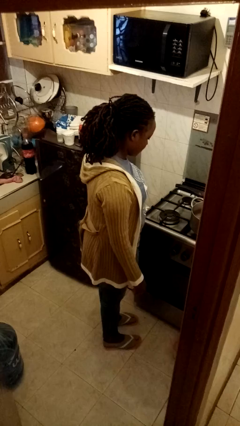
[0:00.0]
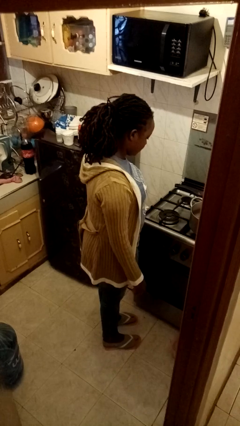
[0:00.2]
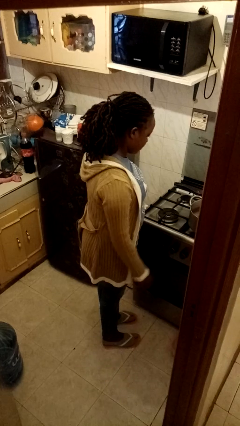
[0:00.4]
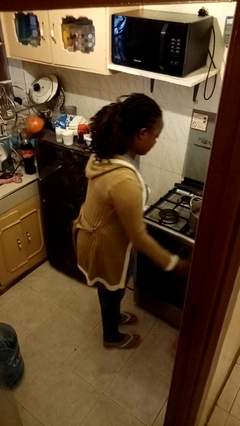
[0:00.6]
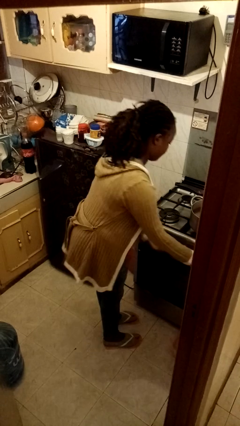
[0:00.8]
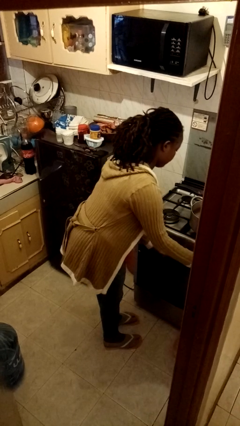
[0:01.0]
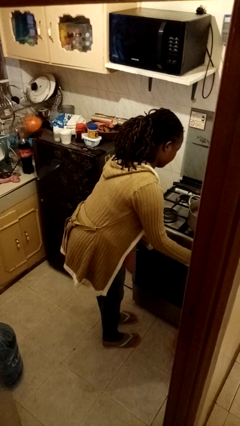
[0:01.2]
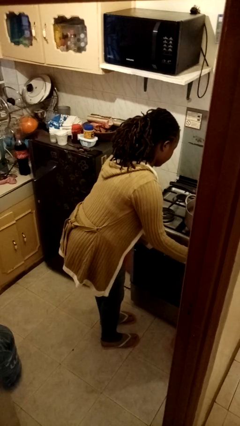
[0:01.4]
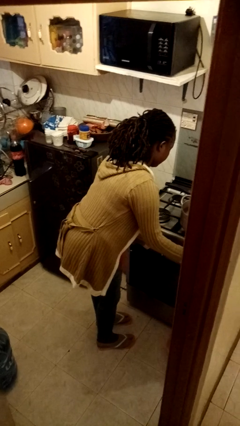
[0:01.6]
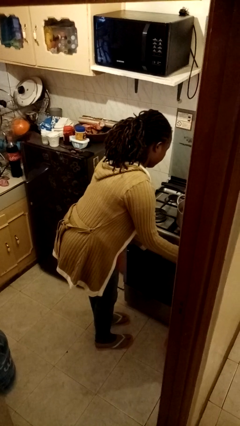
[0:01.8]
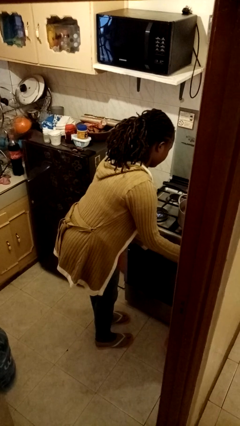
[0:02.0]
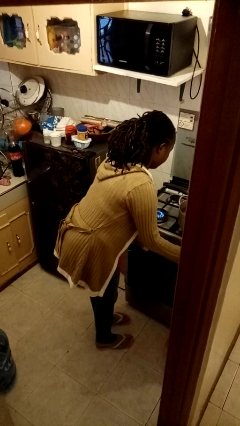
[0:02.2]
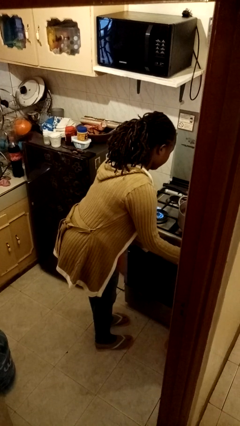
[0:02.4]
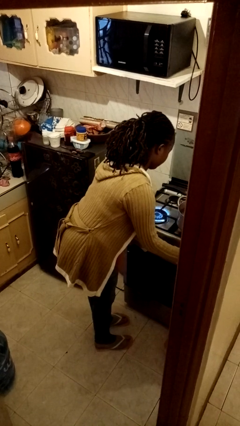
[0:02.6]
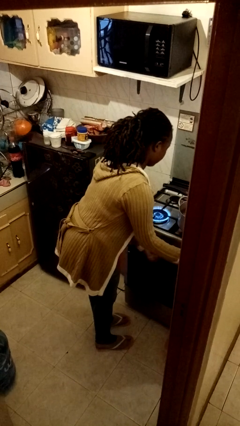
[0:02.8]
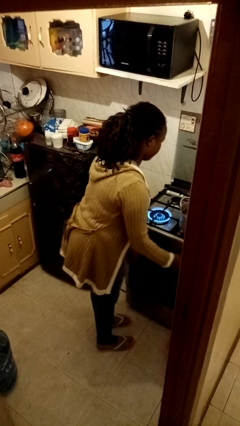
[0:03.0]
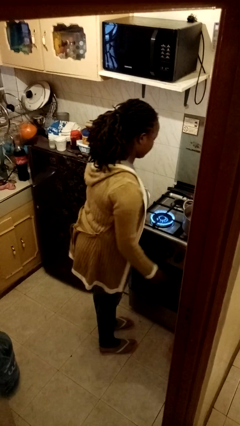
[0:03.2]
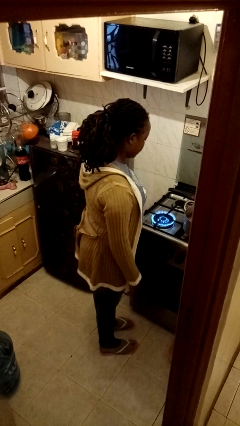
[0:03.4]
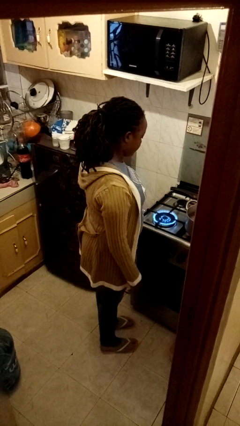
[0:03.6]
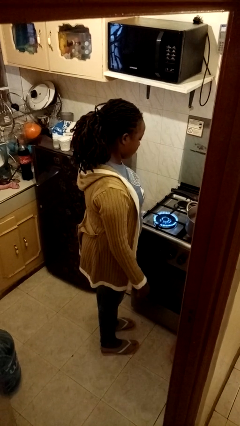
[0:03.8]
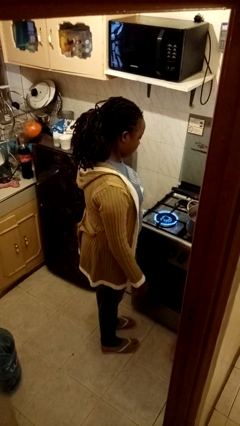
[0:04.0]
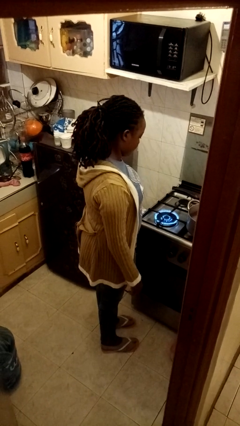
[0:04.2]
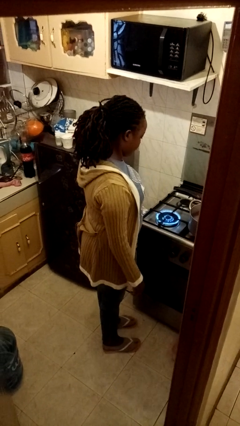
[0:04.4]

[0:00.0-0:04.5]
person turns on stovetop

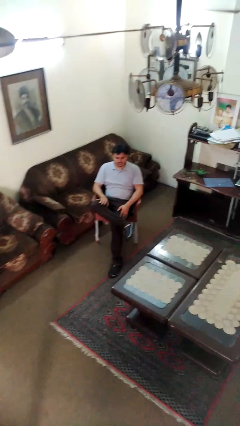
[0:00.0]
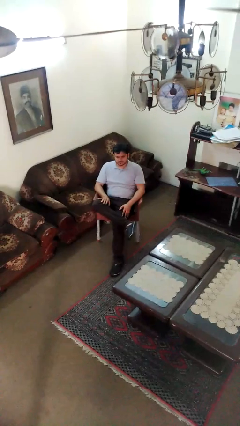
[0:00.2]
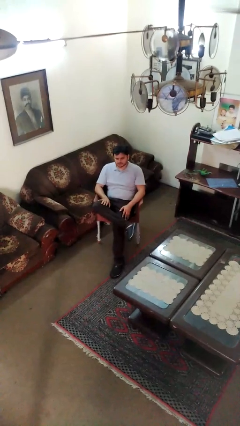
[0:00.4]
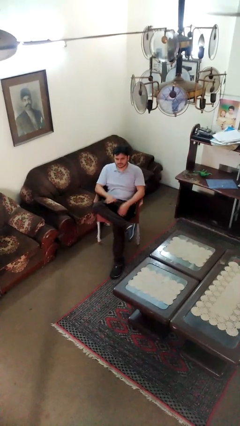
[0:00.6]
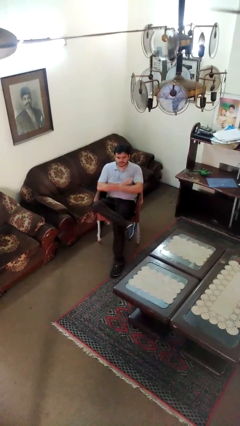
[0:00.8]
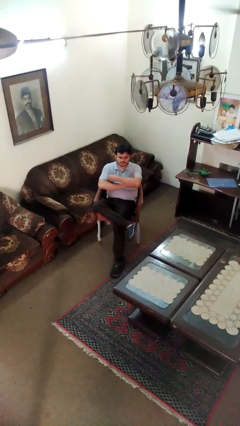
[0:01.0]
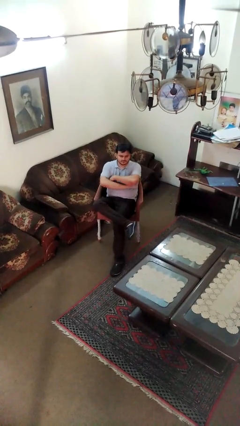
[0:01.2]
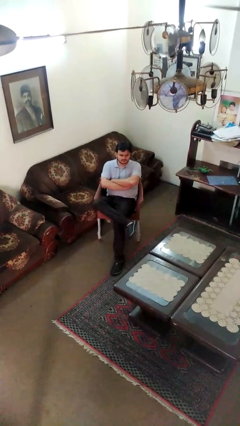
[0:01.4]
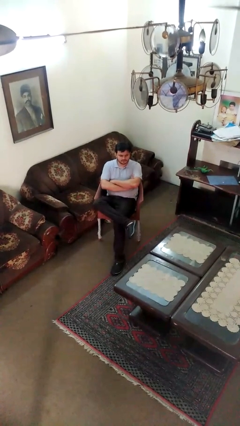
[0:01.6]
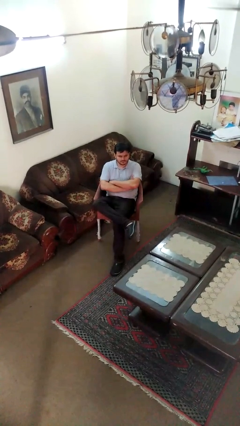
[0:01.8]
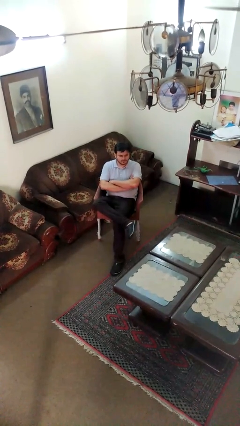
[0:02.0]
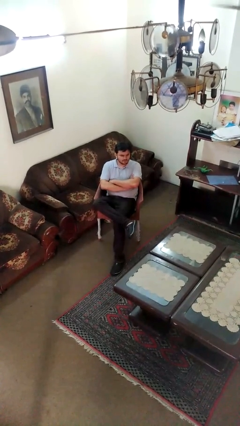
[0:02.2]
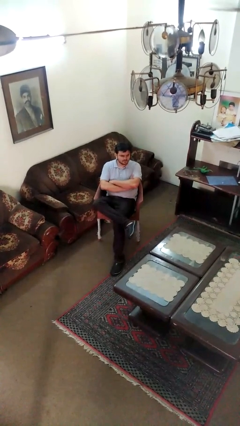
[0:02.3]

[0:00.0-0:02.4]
person crosses arms

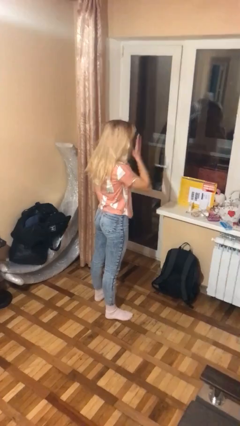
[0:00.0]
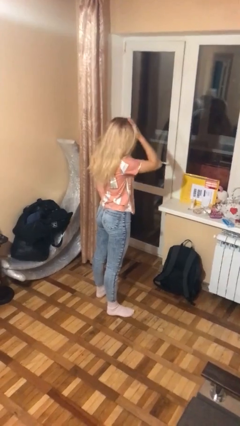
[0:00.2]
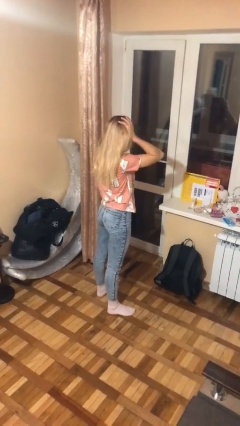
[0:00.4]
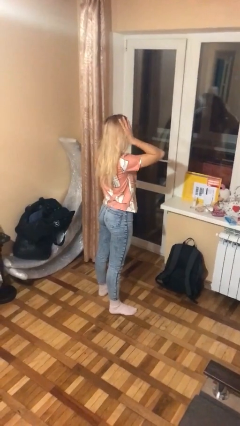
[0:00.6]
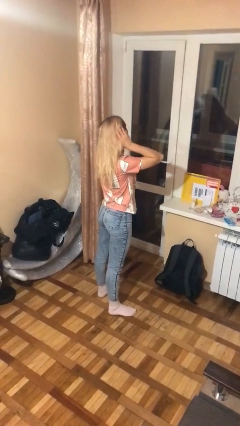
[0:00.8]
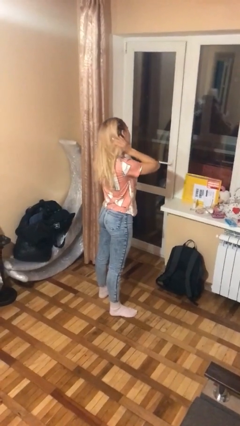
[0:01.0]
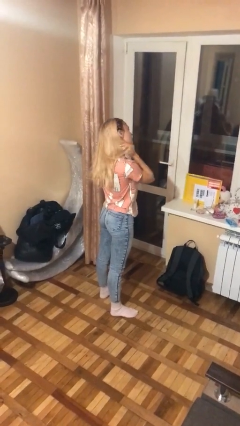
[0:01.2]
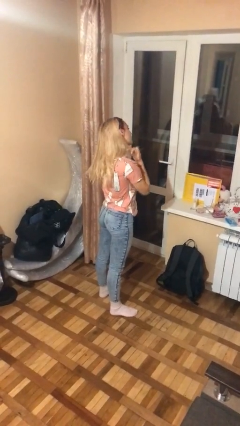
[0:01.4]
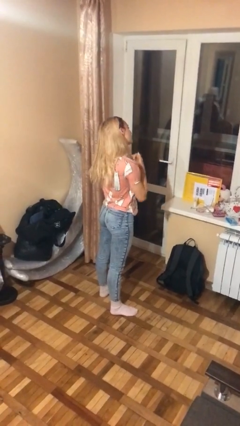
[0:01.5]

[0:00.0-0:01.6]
person strokes hair

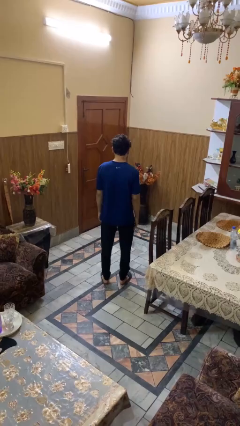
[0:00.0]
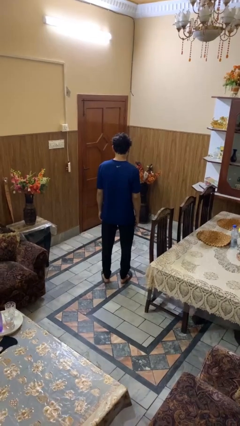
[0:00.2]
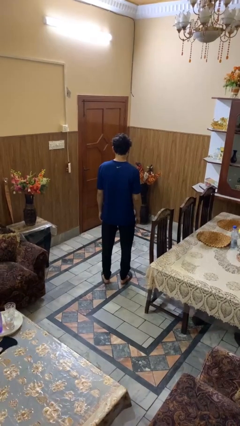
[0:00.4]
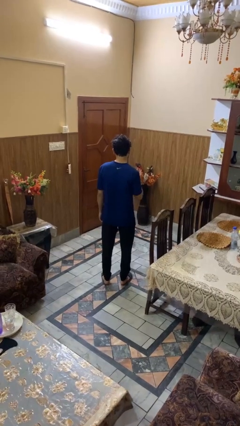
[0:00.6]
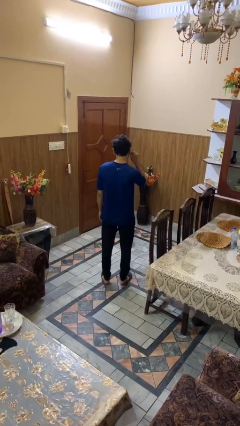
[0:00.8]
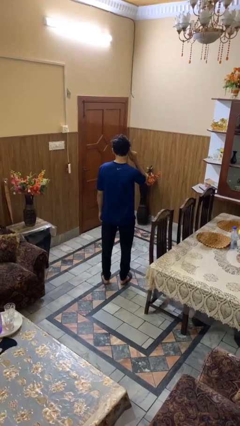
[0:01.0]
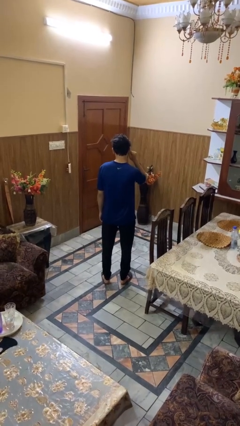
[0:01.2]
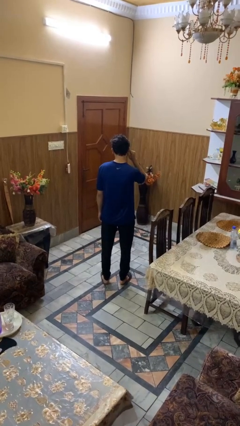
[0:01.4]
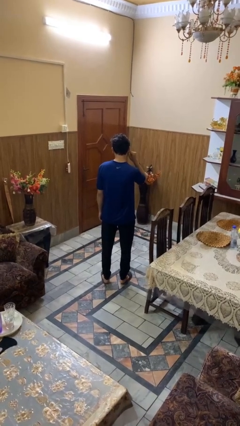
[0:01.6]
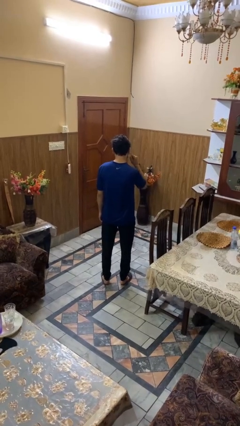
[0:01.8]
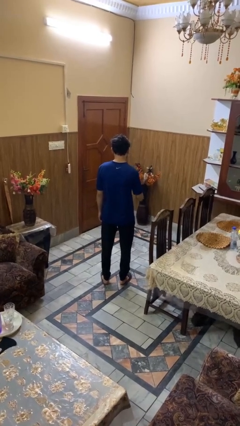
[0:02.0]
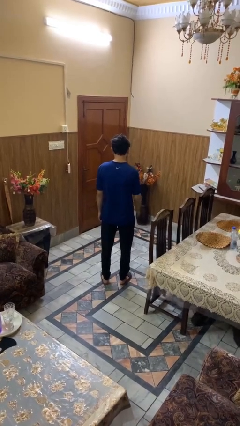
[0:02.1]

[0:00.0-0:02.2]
person touches earlobe

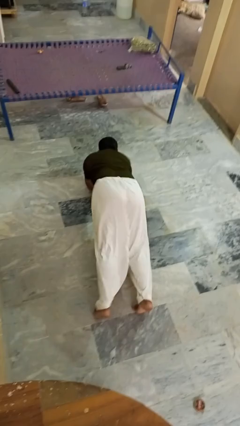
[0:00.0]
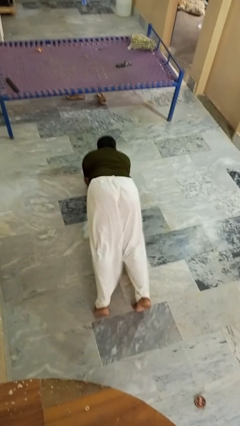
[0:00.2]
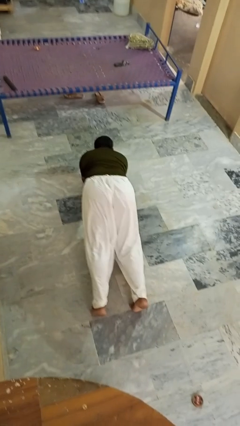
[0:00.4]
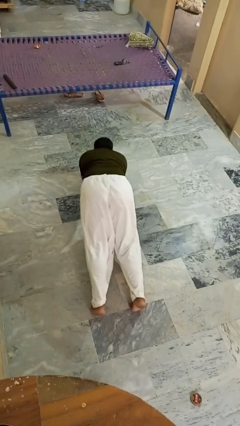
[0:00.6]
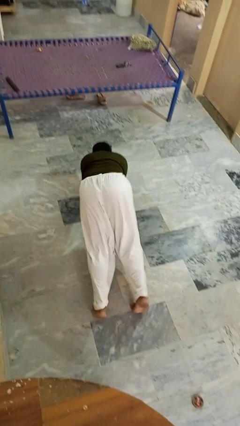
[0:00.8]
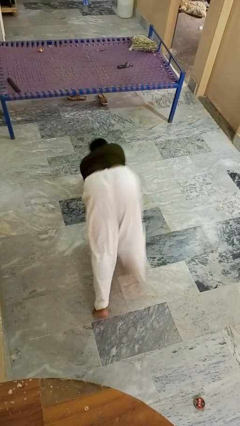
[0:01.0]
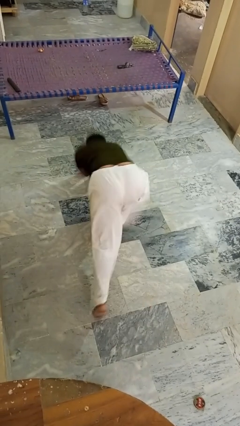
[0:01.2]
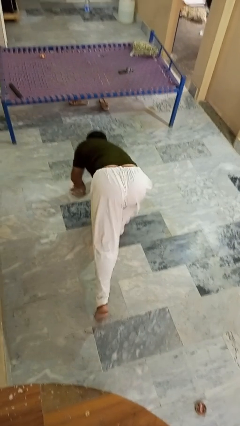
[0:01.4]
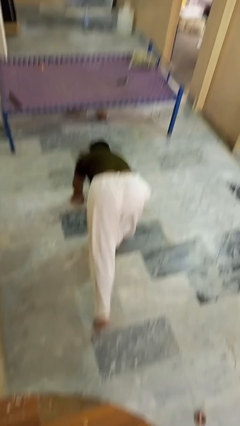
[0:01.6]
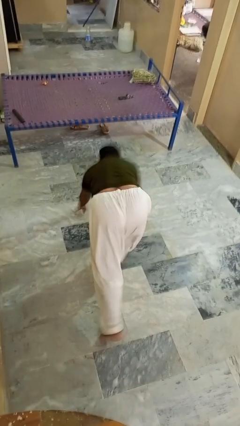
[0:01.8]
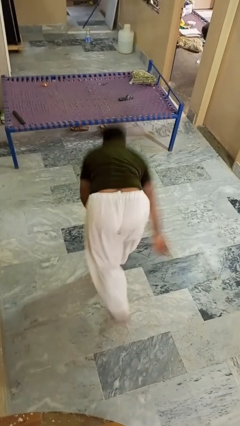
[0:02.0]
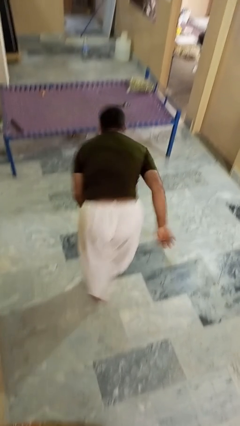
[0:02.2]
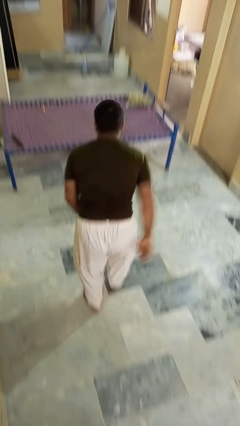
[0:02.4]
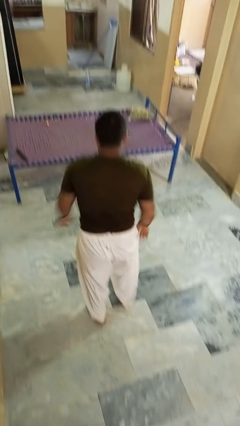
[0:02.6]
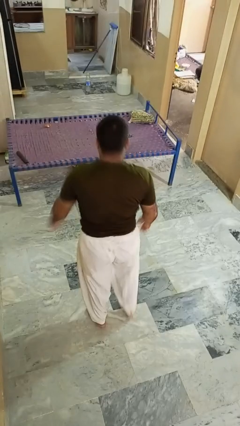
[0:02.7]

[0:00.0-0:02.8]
person stands up from floor

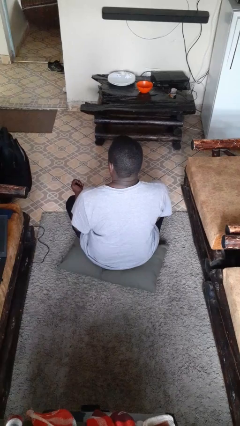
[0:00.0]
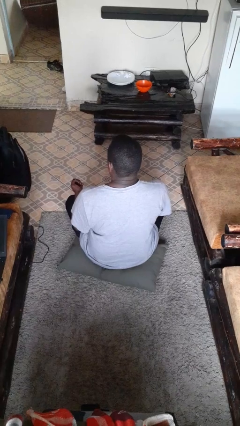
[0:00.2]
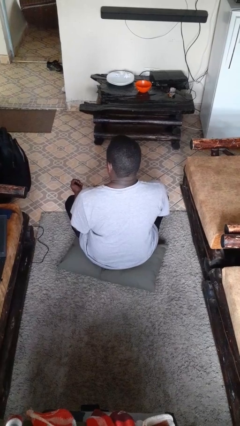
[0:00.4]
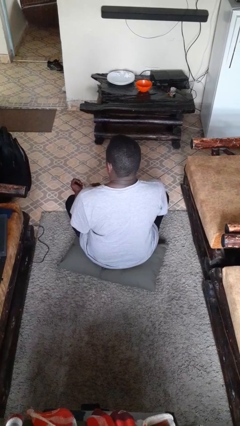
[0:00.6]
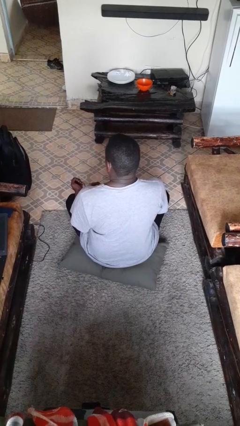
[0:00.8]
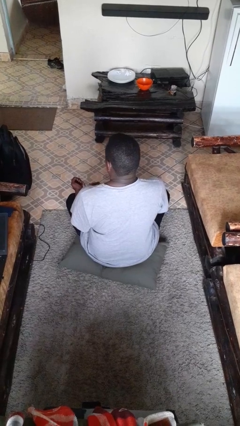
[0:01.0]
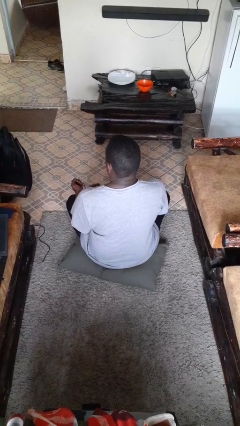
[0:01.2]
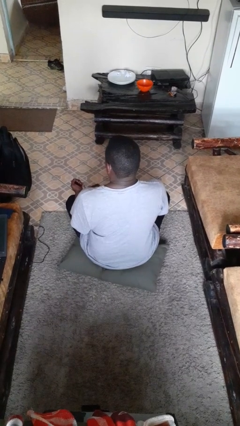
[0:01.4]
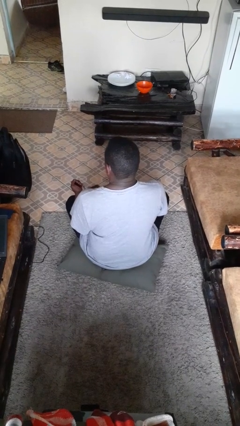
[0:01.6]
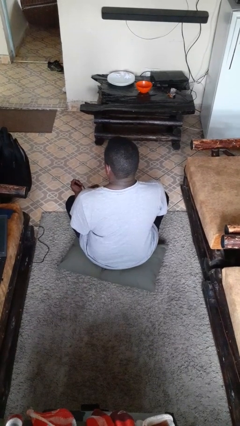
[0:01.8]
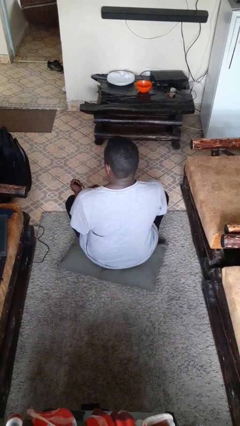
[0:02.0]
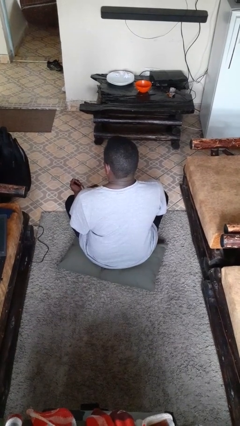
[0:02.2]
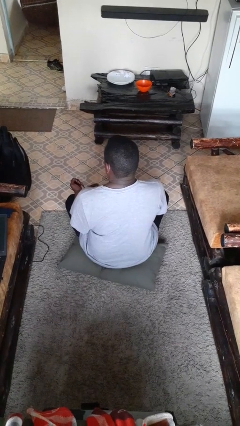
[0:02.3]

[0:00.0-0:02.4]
person clips fingernails

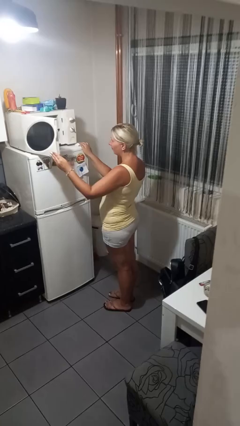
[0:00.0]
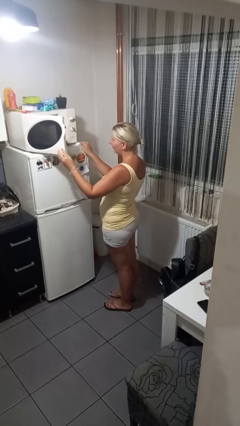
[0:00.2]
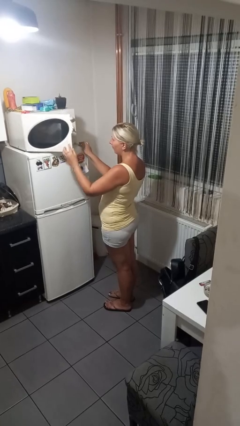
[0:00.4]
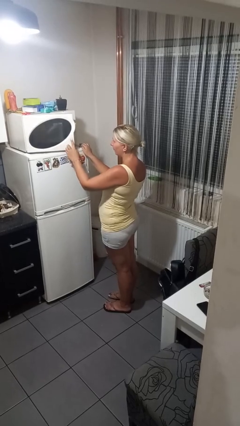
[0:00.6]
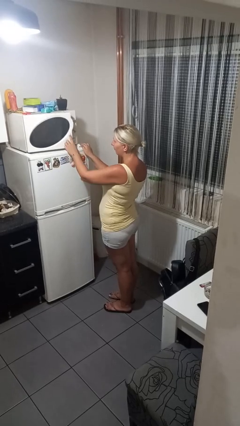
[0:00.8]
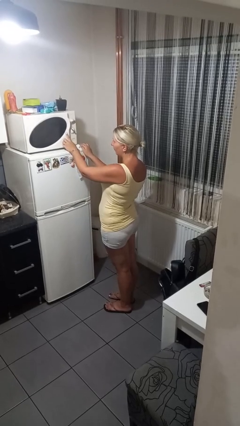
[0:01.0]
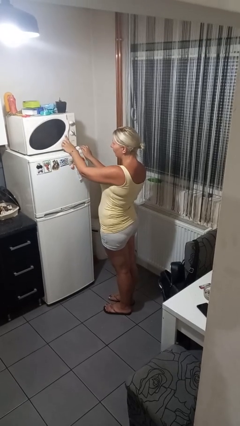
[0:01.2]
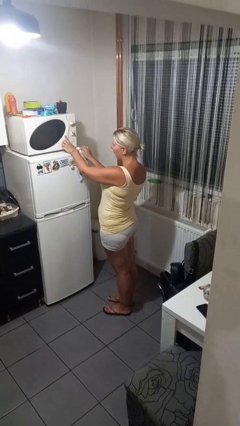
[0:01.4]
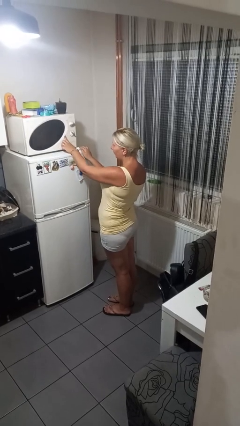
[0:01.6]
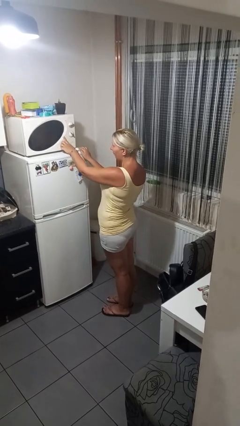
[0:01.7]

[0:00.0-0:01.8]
person closes microwave
